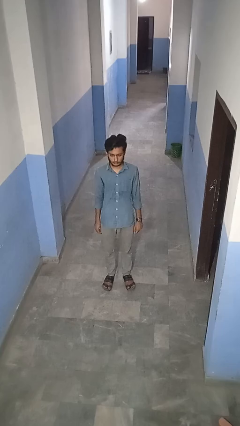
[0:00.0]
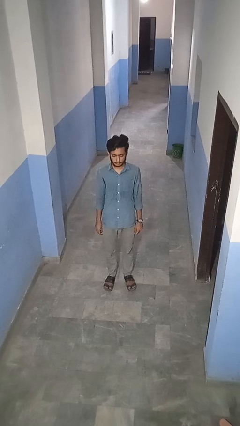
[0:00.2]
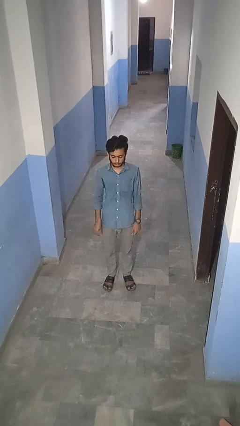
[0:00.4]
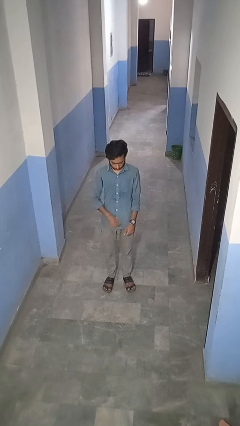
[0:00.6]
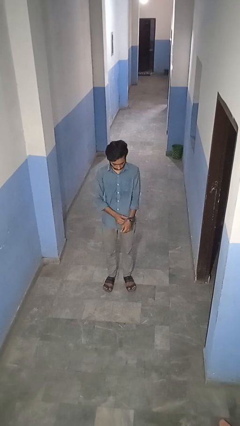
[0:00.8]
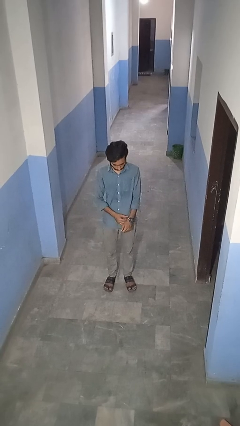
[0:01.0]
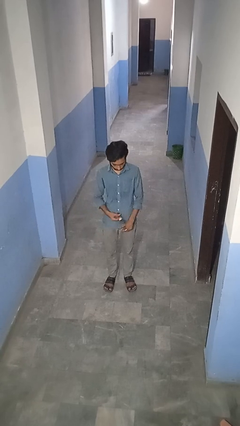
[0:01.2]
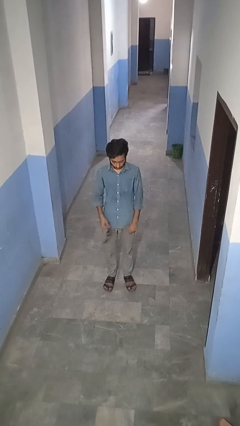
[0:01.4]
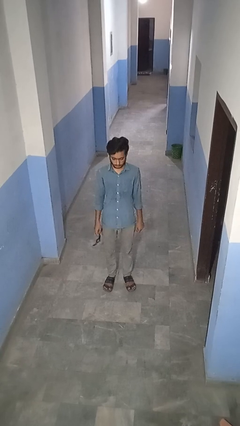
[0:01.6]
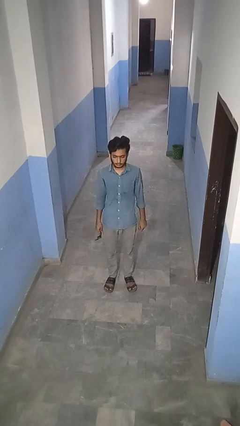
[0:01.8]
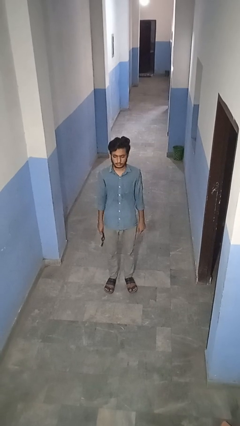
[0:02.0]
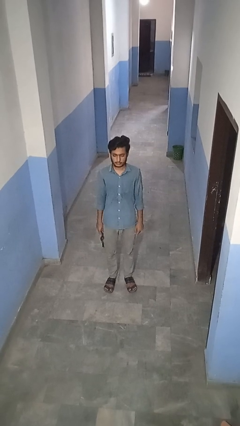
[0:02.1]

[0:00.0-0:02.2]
person takes off wristwatch

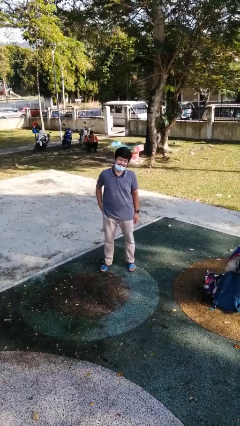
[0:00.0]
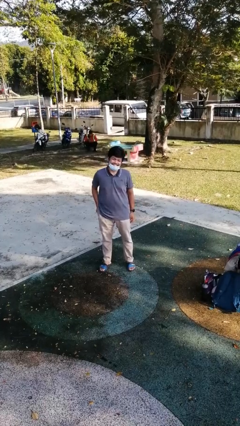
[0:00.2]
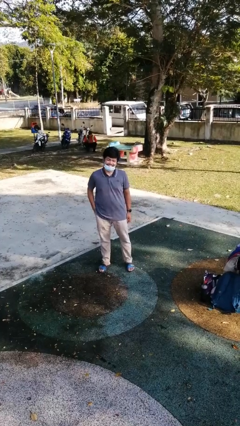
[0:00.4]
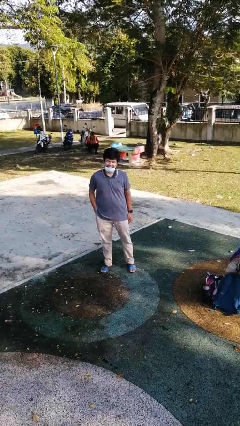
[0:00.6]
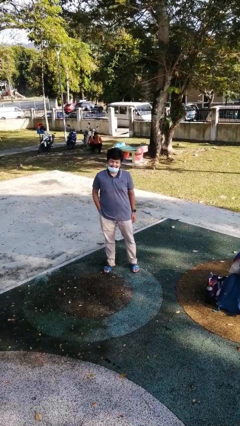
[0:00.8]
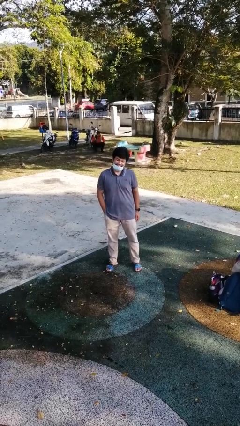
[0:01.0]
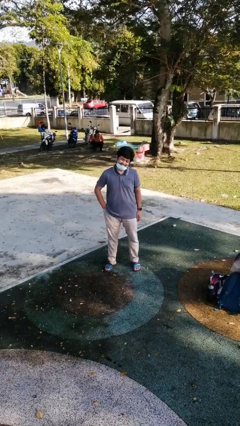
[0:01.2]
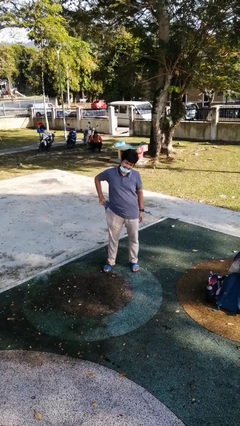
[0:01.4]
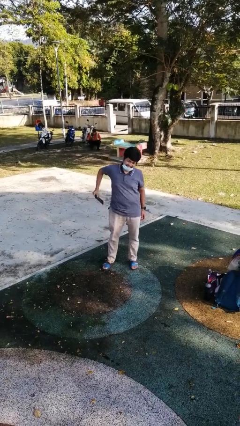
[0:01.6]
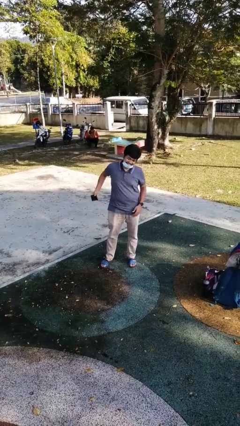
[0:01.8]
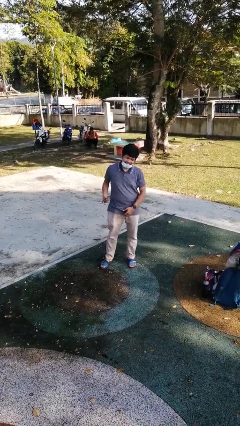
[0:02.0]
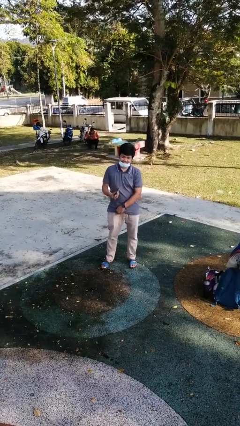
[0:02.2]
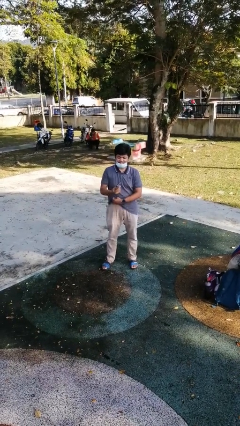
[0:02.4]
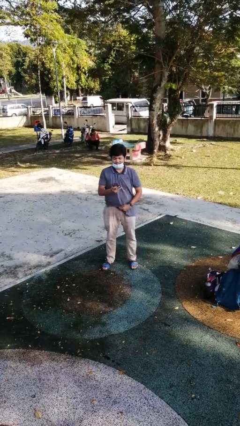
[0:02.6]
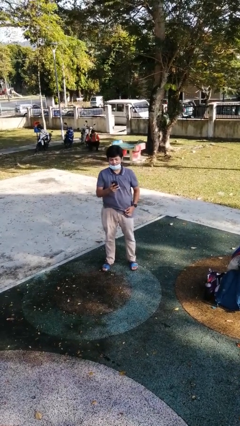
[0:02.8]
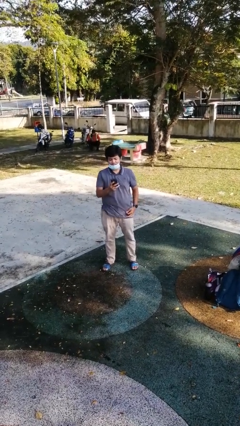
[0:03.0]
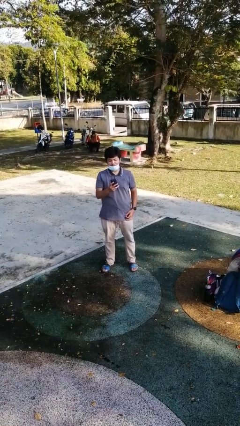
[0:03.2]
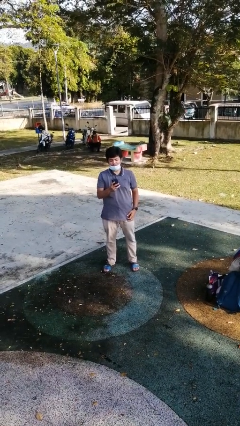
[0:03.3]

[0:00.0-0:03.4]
person takes phone from pocket

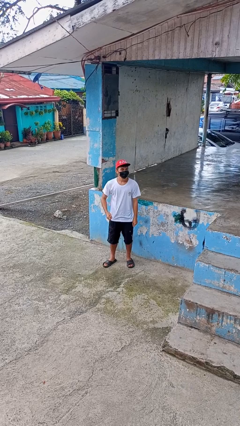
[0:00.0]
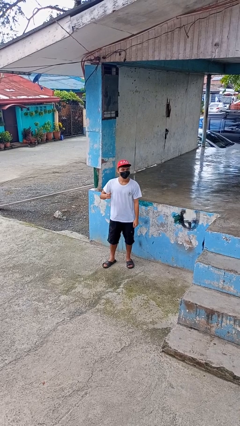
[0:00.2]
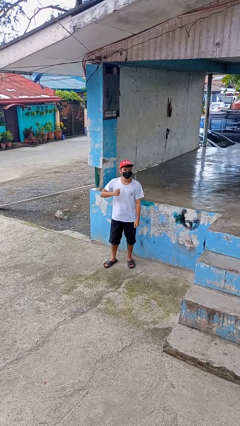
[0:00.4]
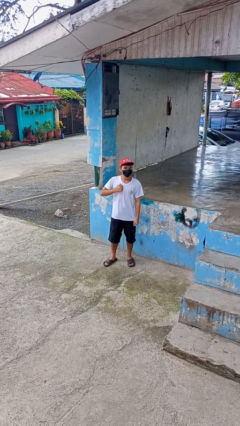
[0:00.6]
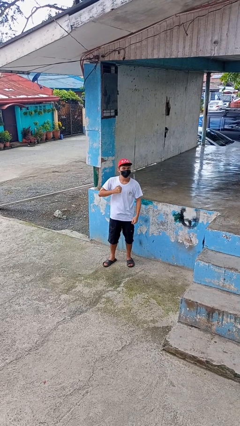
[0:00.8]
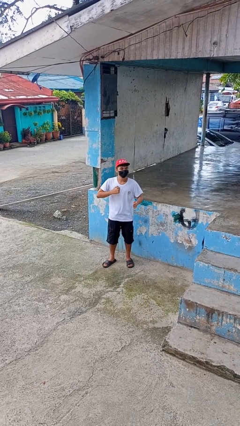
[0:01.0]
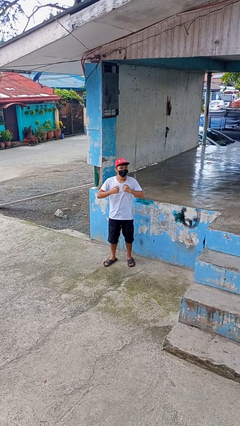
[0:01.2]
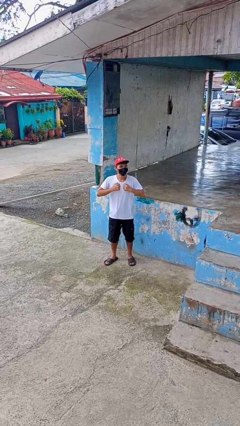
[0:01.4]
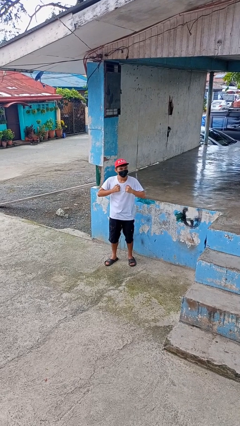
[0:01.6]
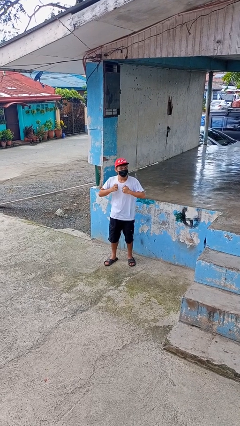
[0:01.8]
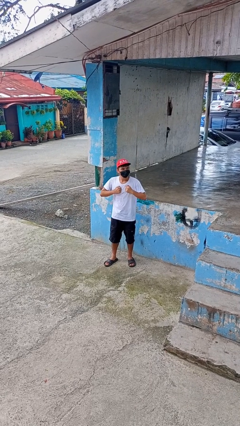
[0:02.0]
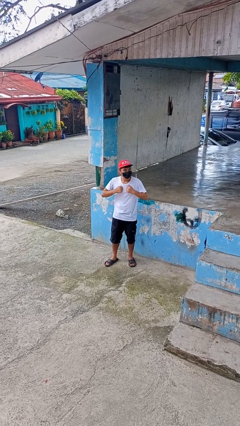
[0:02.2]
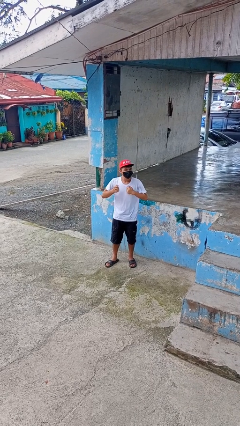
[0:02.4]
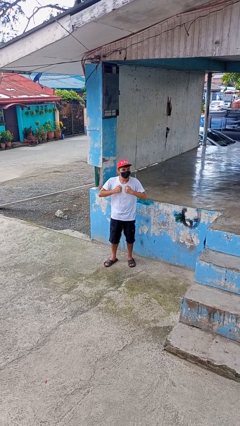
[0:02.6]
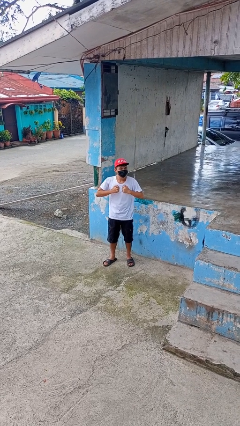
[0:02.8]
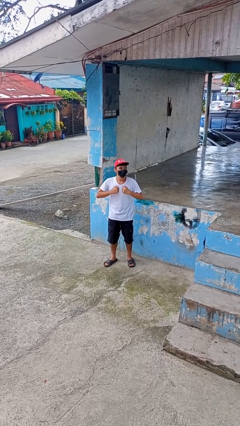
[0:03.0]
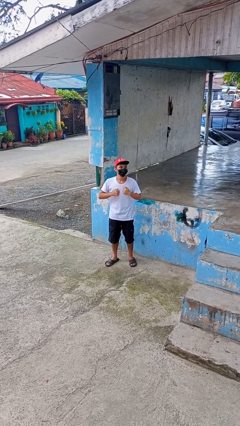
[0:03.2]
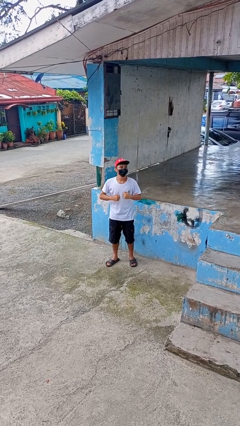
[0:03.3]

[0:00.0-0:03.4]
person drums on chest

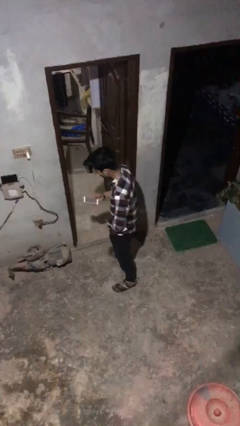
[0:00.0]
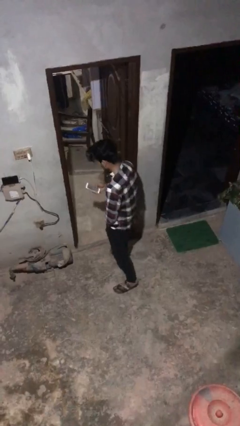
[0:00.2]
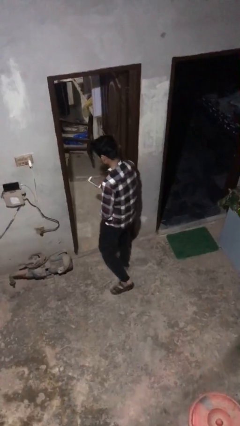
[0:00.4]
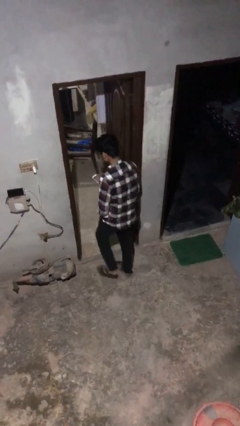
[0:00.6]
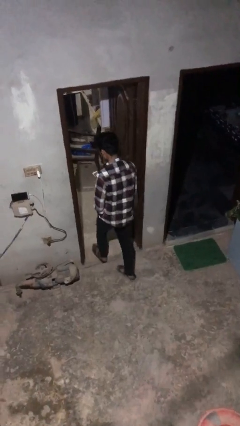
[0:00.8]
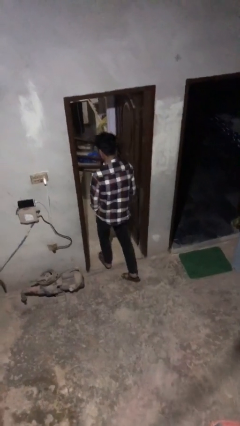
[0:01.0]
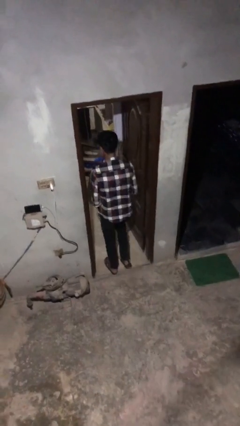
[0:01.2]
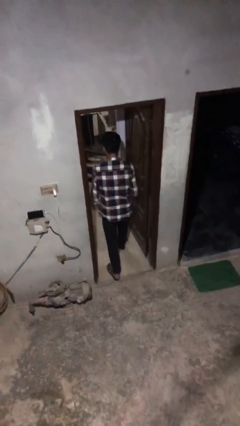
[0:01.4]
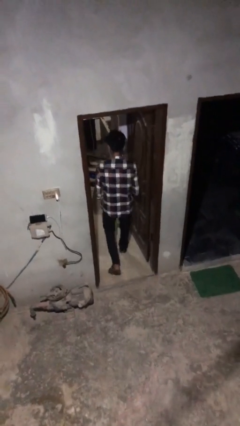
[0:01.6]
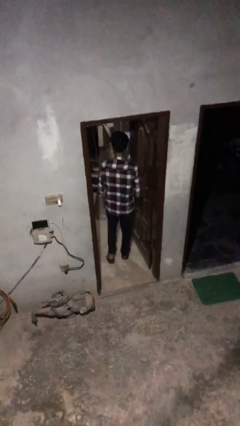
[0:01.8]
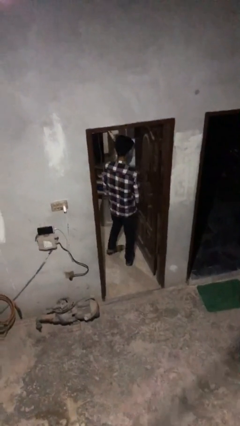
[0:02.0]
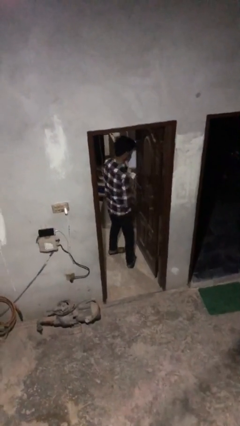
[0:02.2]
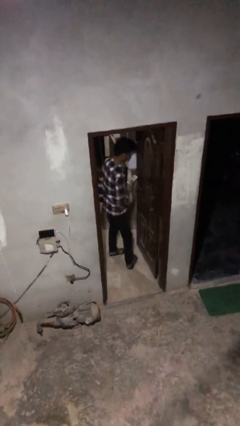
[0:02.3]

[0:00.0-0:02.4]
person exits scene through structure

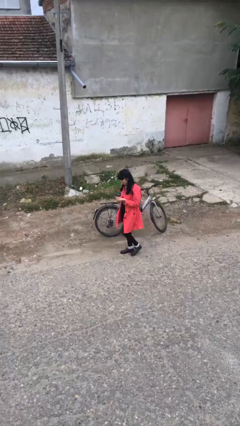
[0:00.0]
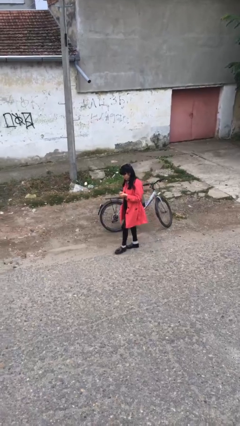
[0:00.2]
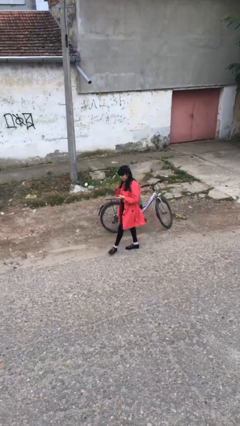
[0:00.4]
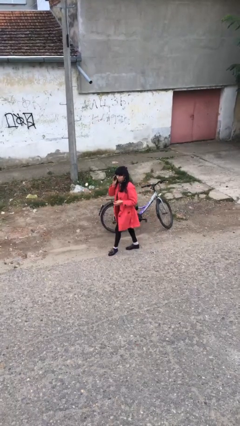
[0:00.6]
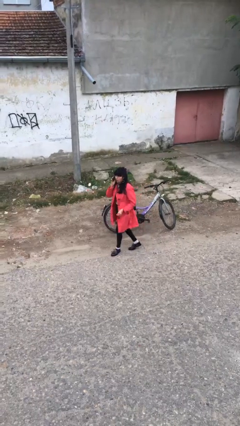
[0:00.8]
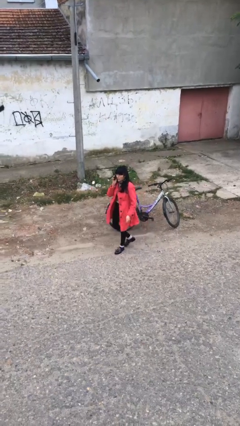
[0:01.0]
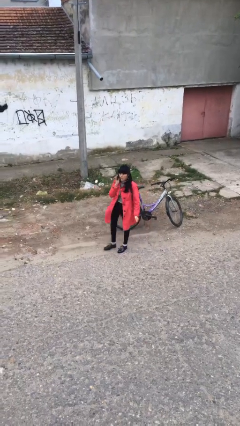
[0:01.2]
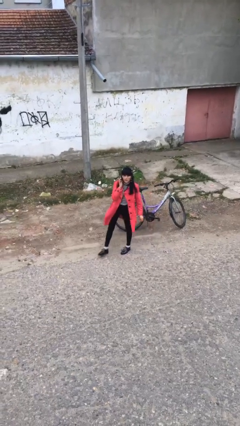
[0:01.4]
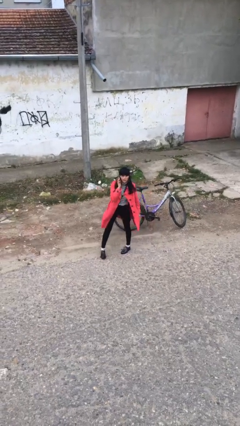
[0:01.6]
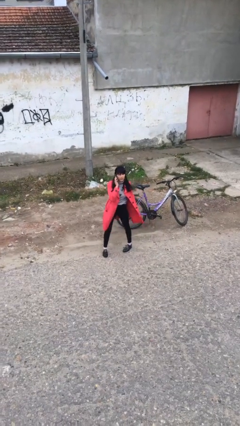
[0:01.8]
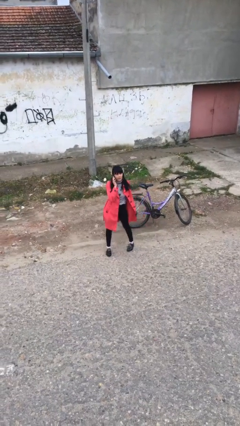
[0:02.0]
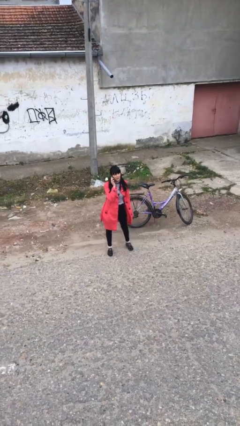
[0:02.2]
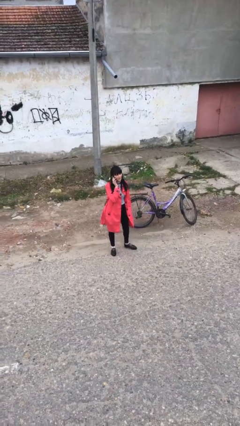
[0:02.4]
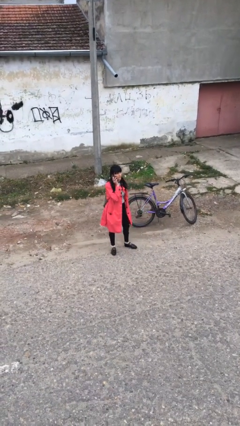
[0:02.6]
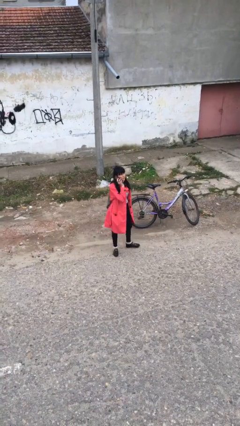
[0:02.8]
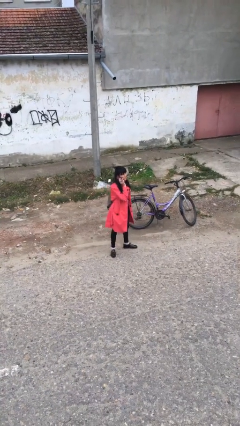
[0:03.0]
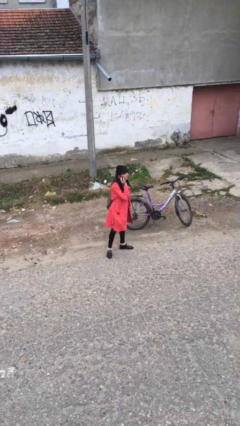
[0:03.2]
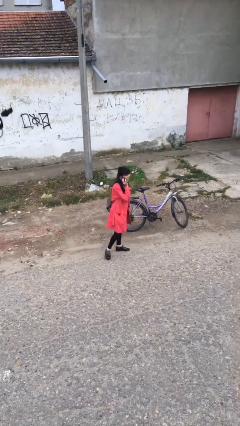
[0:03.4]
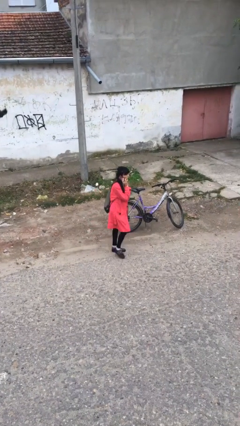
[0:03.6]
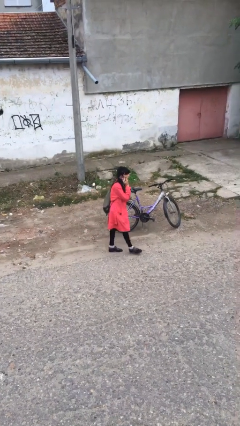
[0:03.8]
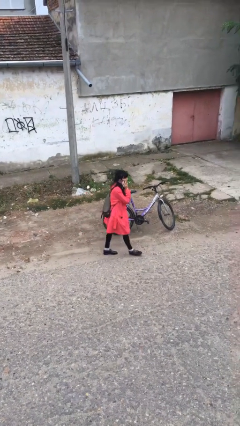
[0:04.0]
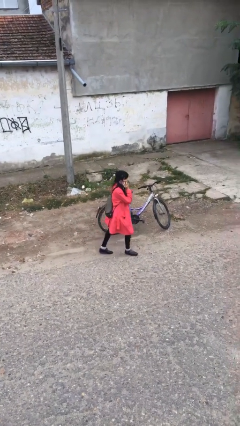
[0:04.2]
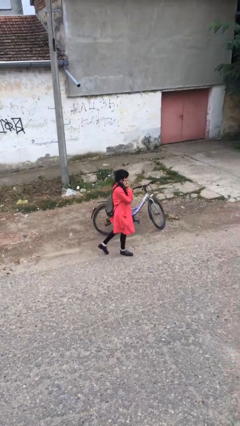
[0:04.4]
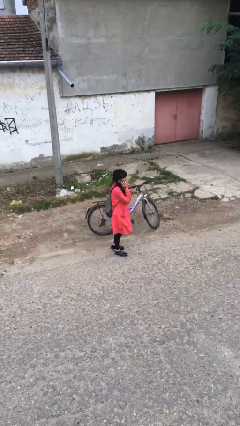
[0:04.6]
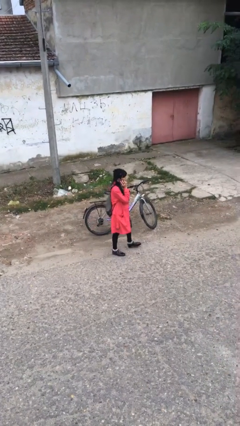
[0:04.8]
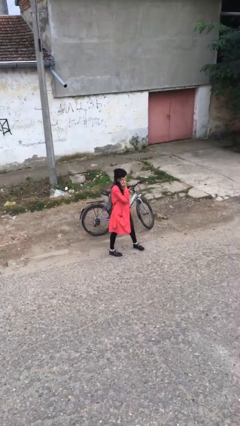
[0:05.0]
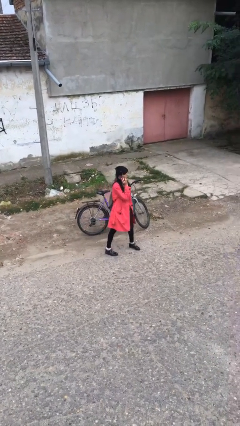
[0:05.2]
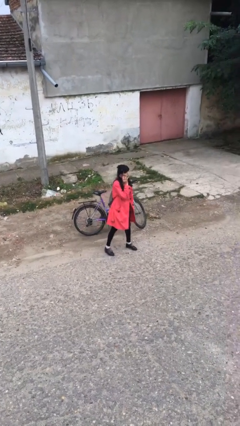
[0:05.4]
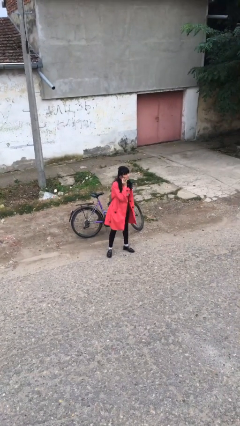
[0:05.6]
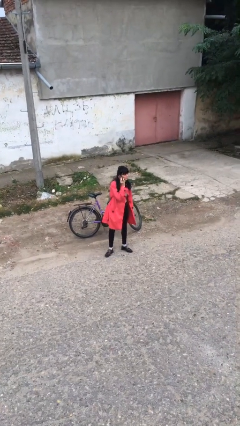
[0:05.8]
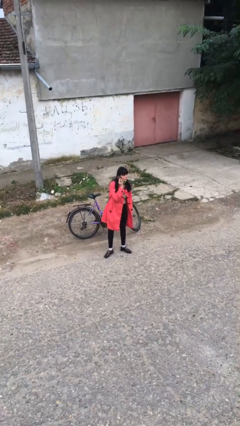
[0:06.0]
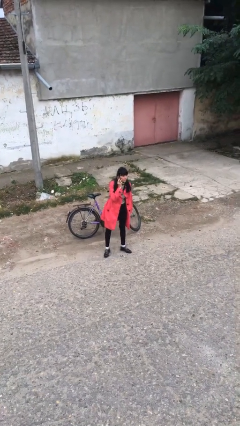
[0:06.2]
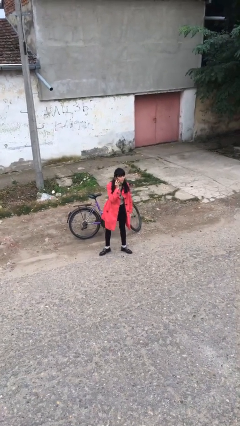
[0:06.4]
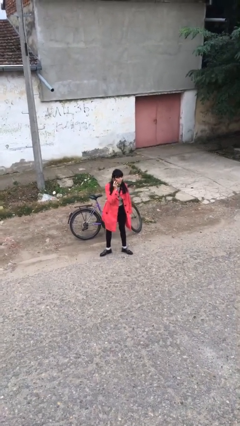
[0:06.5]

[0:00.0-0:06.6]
person talks on phone
